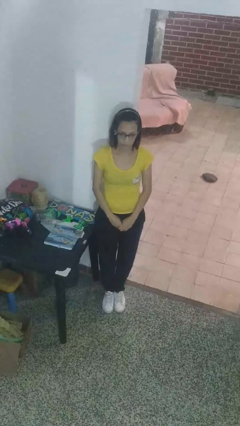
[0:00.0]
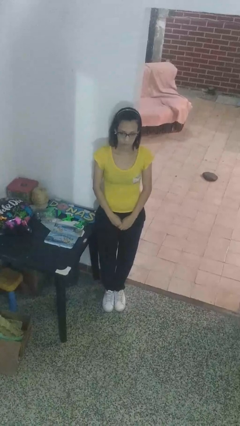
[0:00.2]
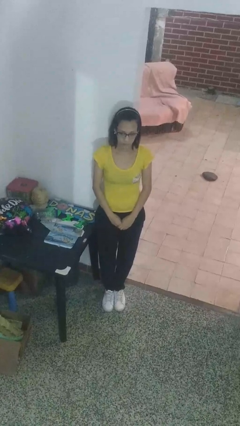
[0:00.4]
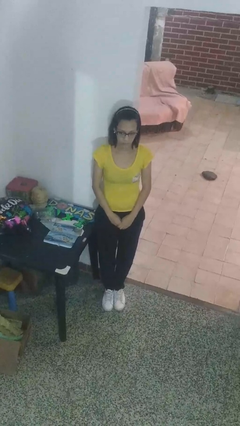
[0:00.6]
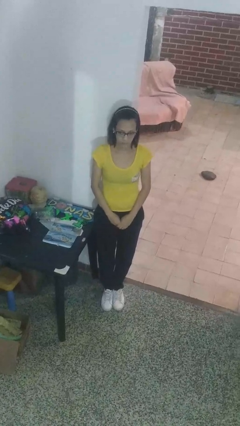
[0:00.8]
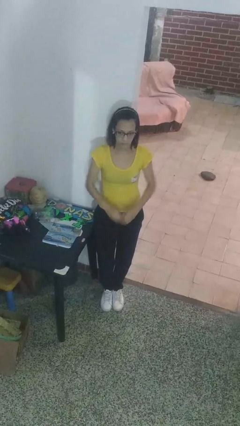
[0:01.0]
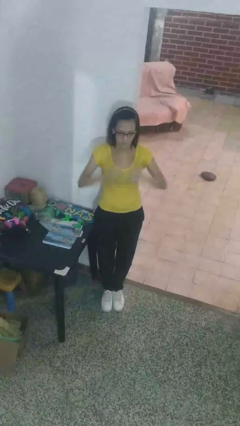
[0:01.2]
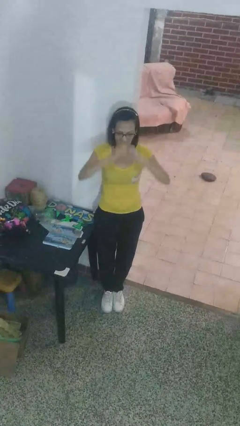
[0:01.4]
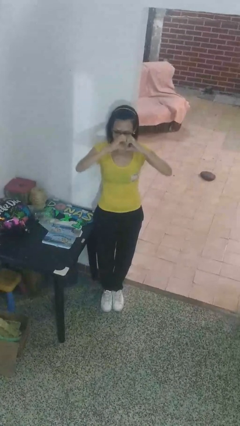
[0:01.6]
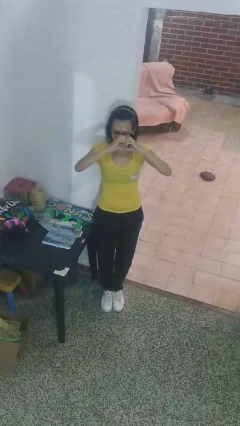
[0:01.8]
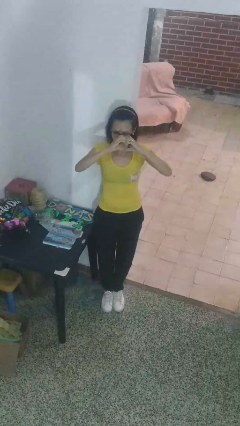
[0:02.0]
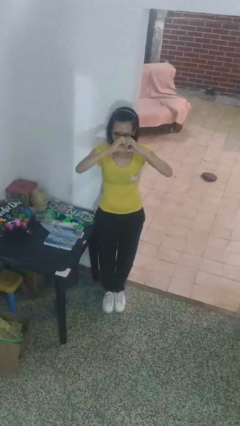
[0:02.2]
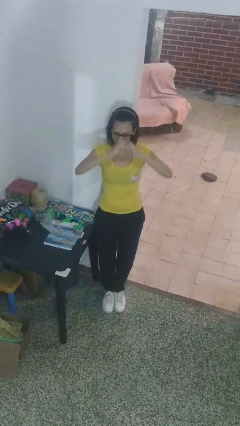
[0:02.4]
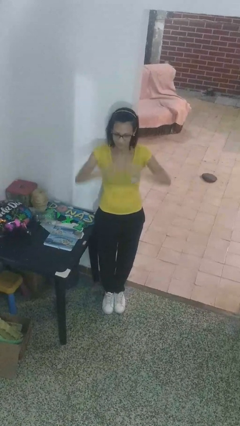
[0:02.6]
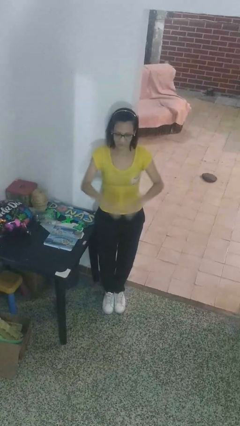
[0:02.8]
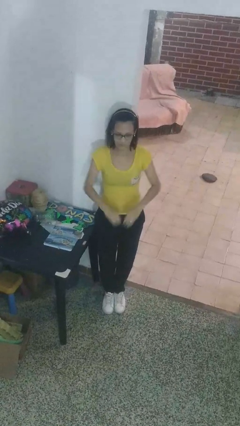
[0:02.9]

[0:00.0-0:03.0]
person gestures heart

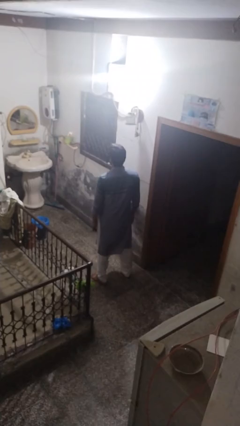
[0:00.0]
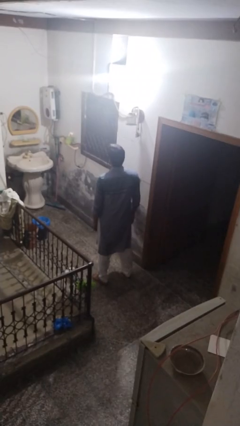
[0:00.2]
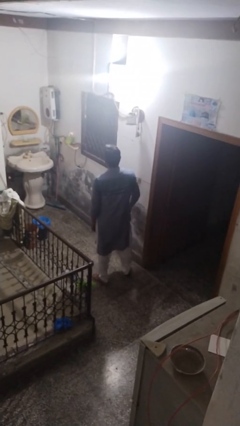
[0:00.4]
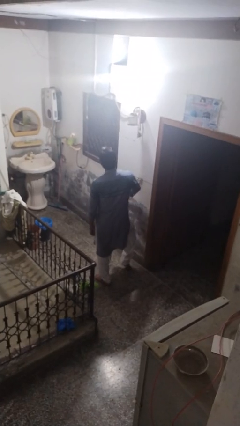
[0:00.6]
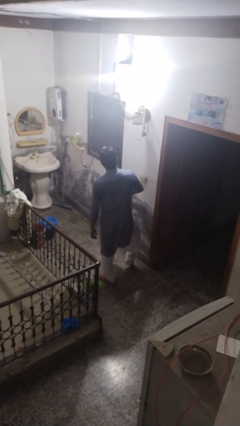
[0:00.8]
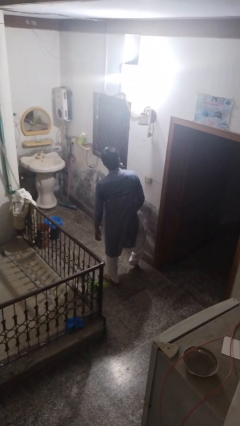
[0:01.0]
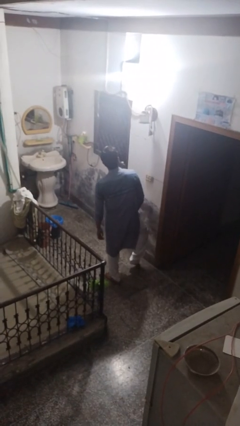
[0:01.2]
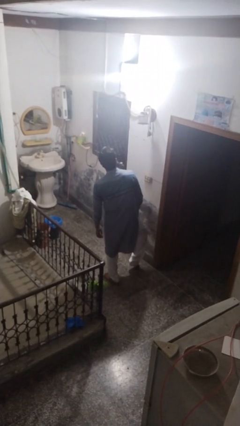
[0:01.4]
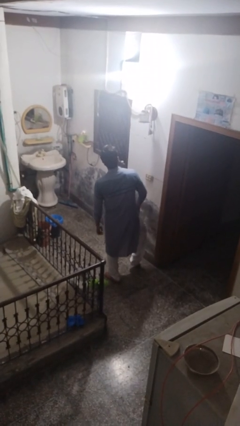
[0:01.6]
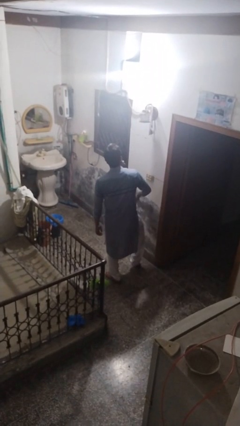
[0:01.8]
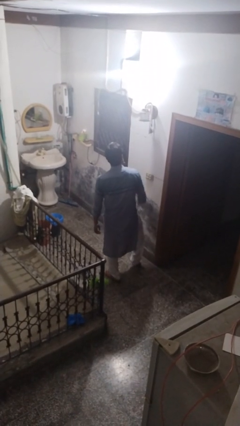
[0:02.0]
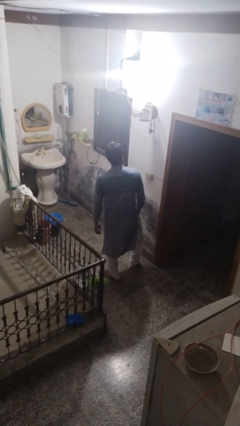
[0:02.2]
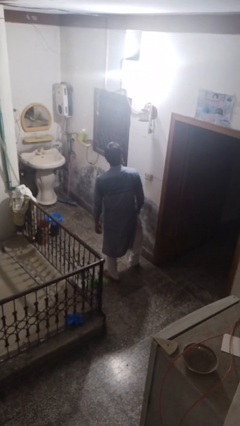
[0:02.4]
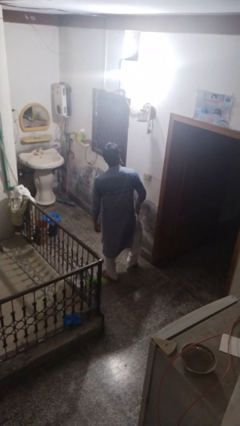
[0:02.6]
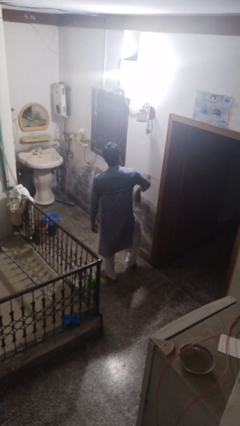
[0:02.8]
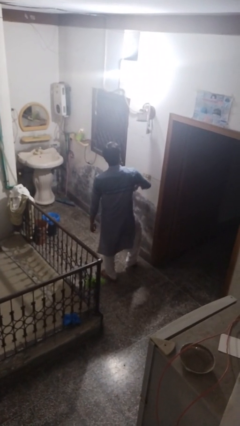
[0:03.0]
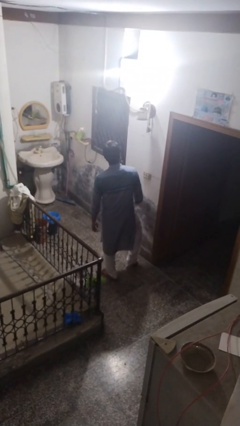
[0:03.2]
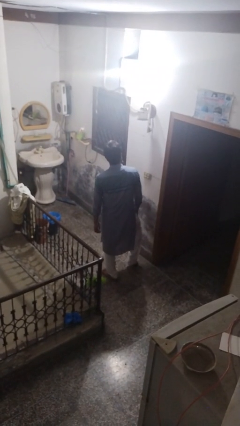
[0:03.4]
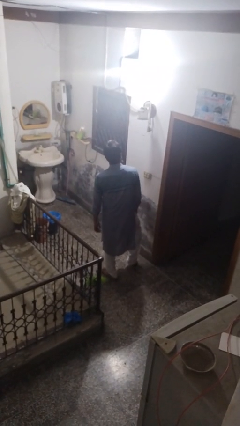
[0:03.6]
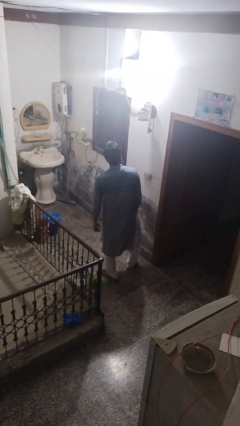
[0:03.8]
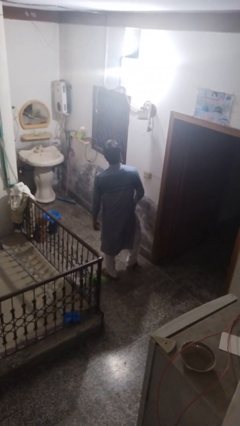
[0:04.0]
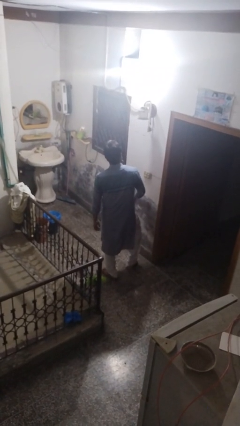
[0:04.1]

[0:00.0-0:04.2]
person slaps hands on thighs

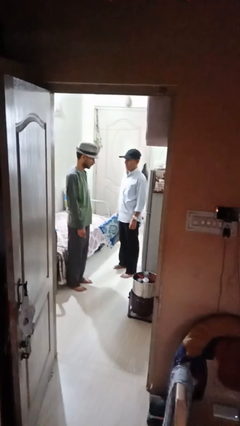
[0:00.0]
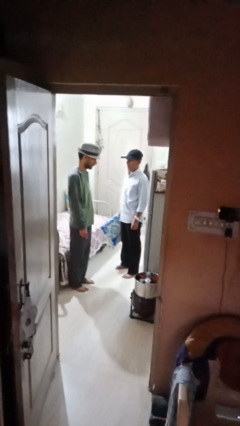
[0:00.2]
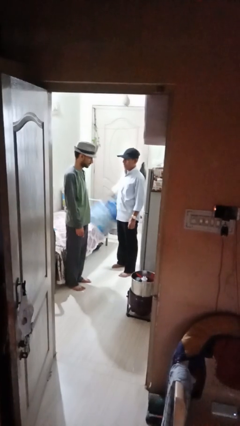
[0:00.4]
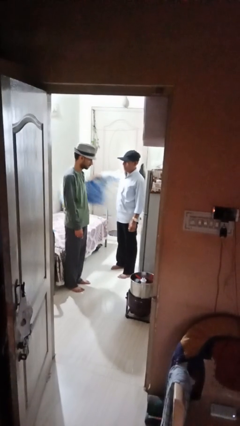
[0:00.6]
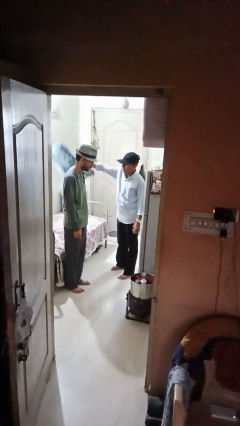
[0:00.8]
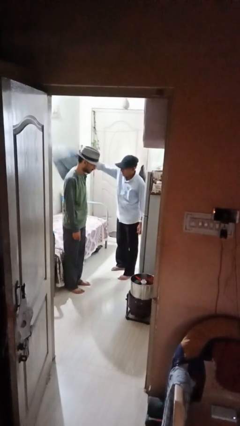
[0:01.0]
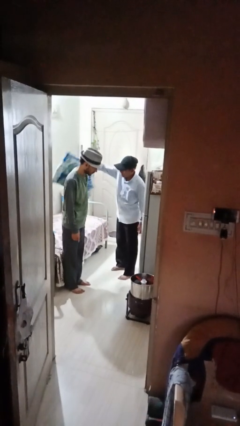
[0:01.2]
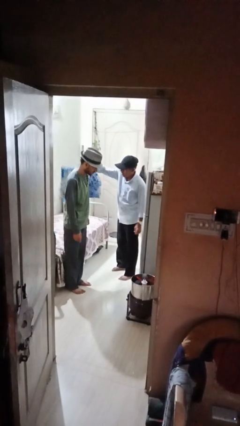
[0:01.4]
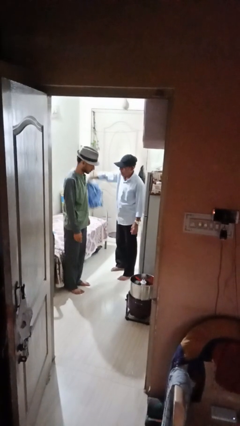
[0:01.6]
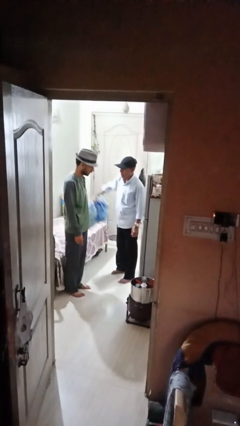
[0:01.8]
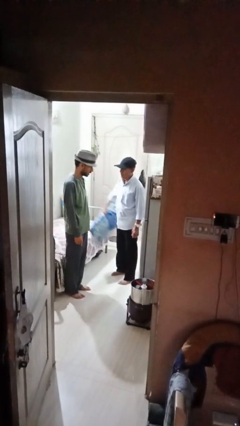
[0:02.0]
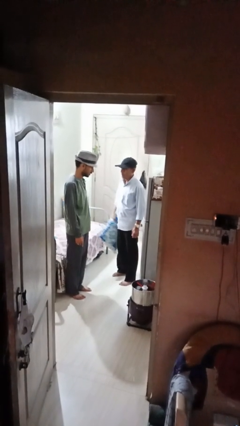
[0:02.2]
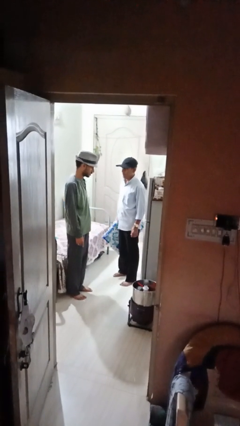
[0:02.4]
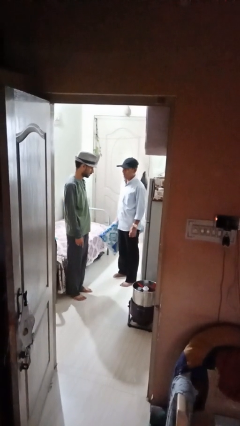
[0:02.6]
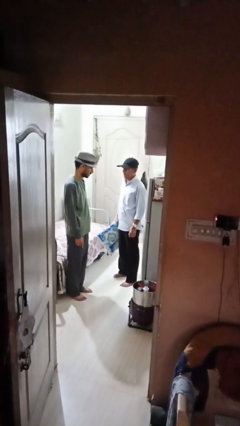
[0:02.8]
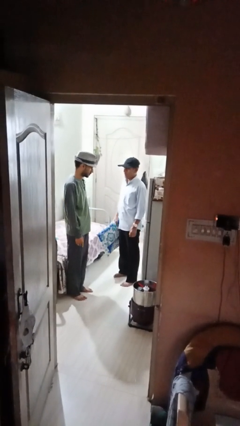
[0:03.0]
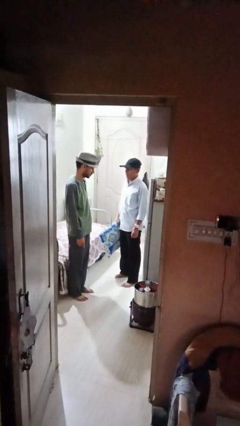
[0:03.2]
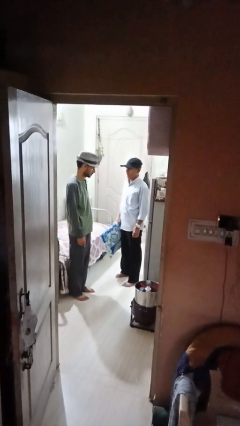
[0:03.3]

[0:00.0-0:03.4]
person hits person with pillow

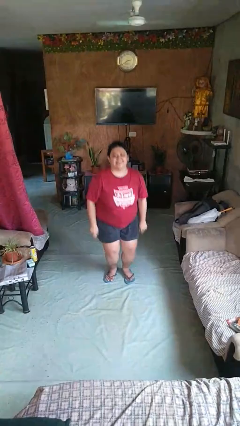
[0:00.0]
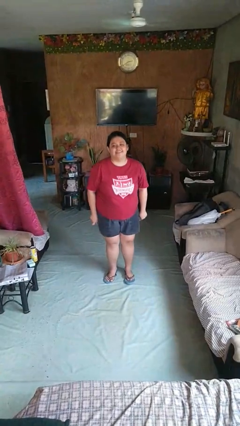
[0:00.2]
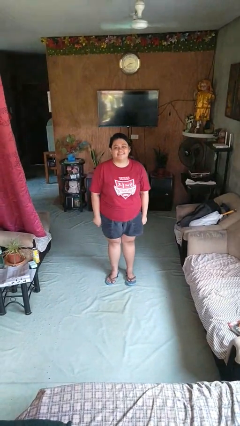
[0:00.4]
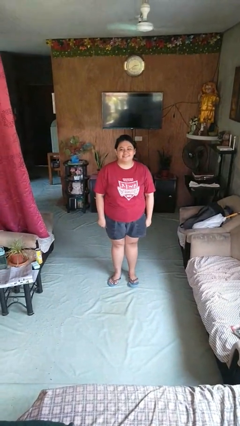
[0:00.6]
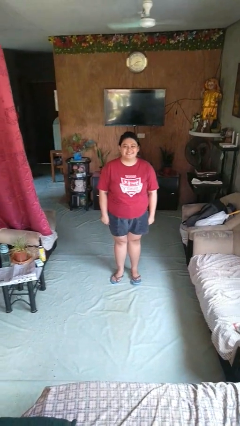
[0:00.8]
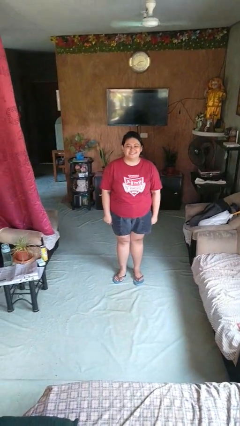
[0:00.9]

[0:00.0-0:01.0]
person stands up

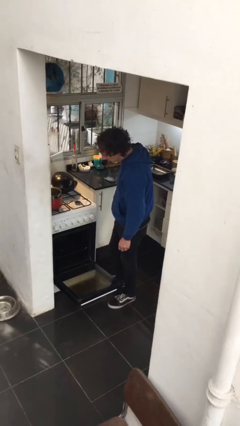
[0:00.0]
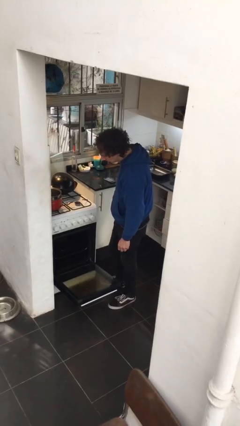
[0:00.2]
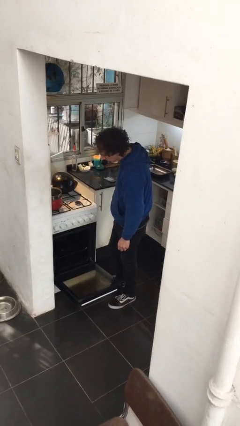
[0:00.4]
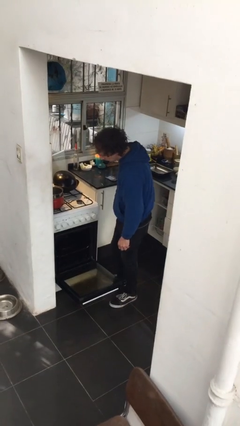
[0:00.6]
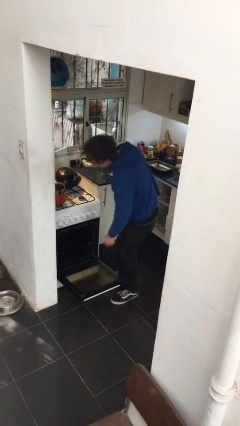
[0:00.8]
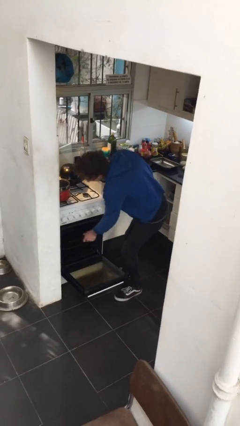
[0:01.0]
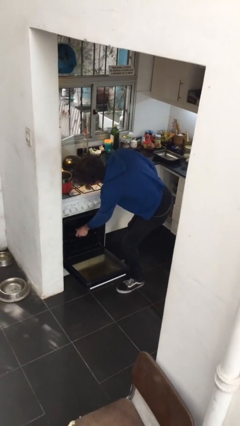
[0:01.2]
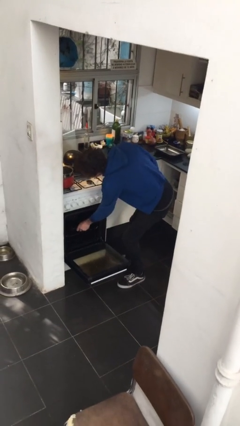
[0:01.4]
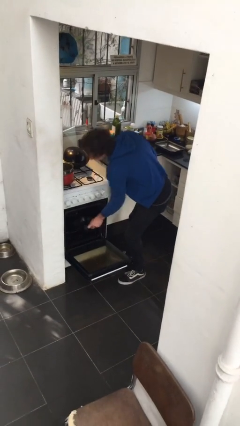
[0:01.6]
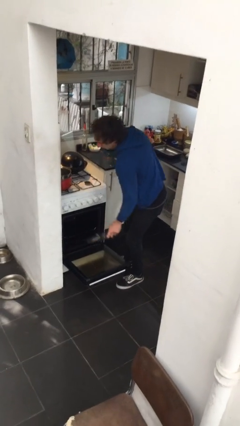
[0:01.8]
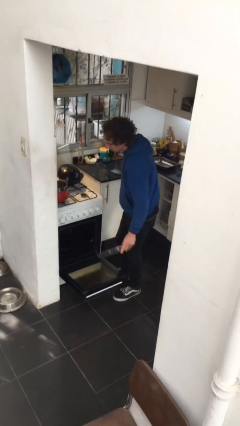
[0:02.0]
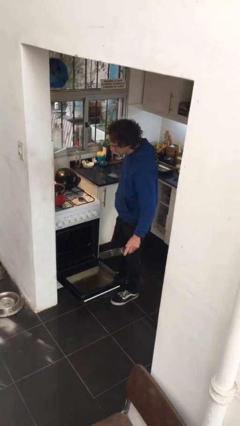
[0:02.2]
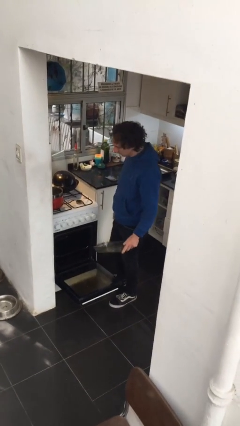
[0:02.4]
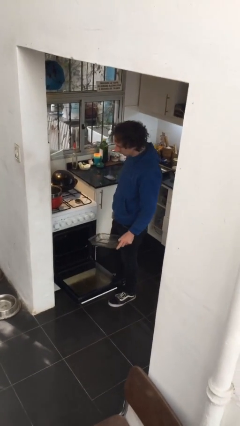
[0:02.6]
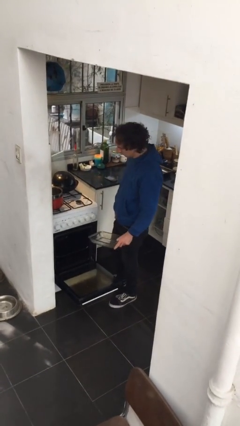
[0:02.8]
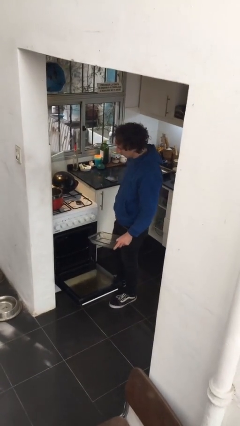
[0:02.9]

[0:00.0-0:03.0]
person takes object from oven

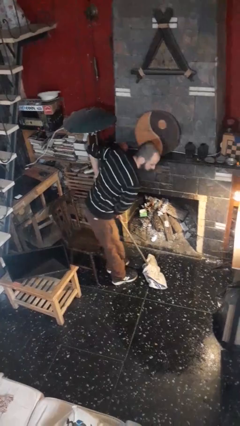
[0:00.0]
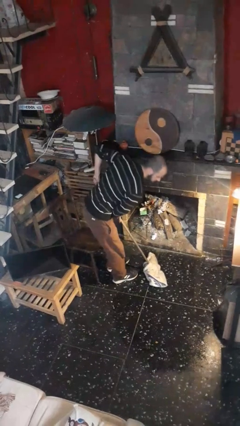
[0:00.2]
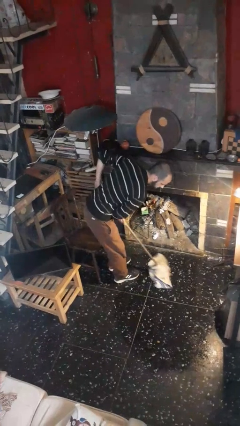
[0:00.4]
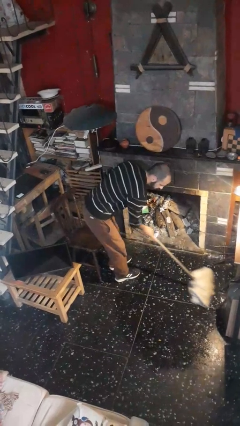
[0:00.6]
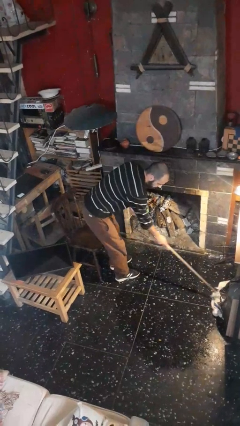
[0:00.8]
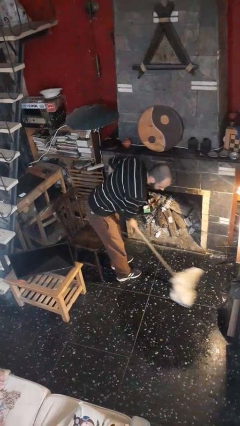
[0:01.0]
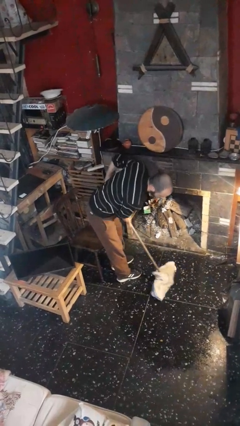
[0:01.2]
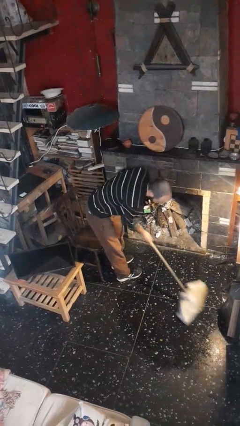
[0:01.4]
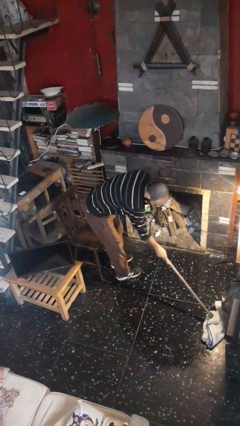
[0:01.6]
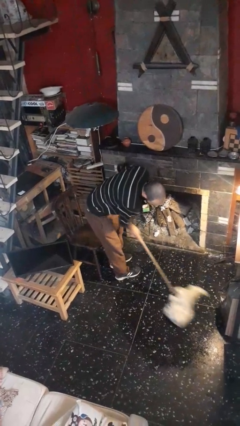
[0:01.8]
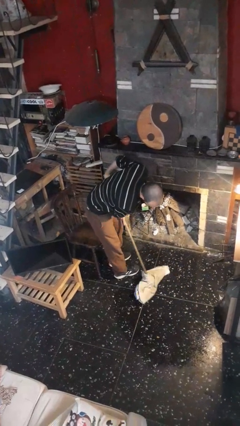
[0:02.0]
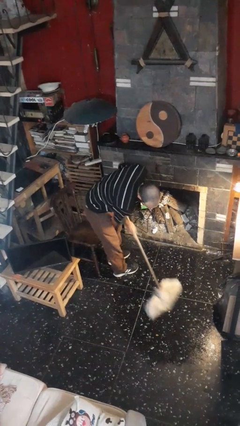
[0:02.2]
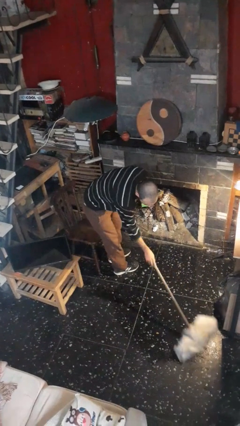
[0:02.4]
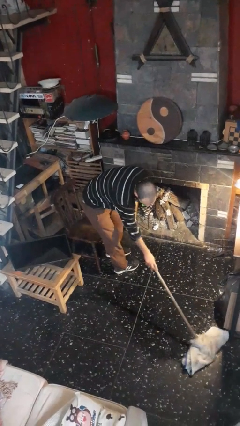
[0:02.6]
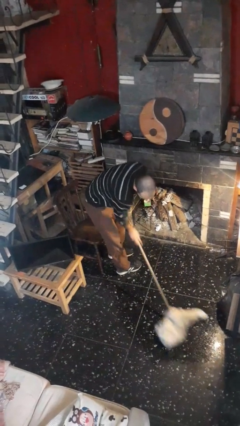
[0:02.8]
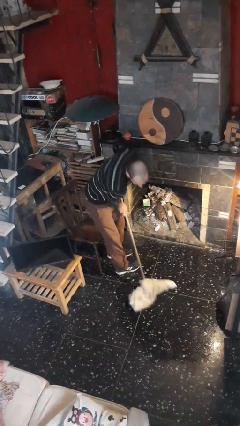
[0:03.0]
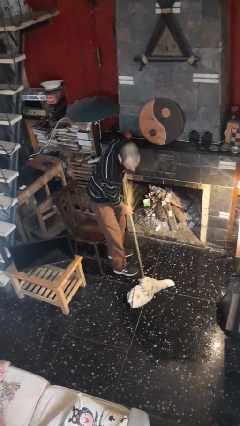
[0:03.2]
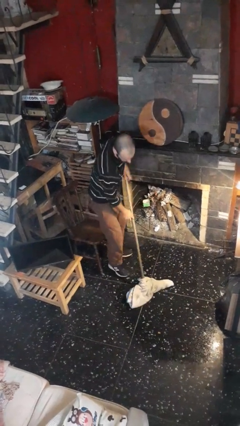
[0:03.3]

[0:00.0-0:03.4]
person mops
